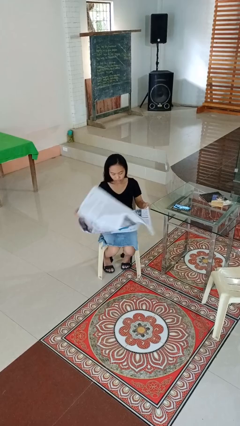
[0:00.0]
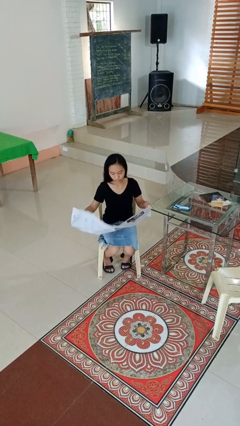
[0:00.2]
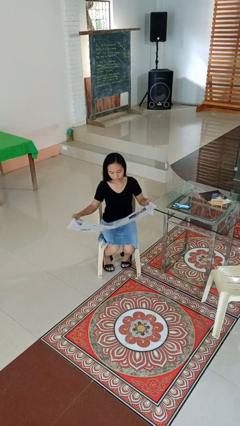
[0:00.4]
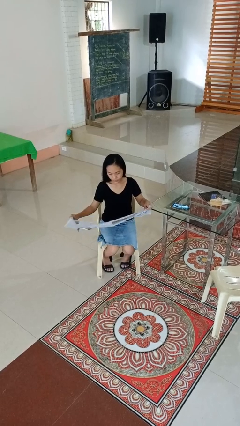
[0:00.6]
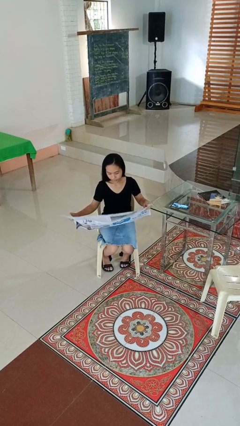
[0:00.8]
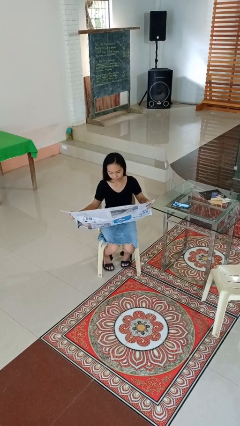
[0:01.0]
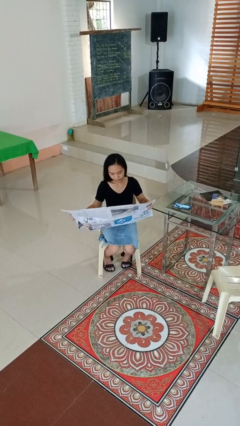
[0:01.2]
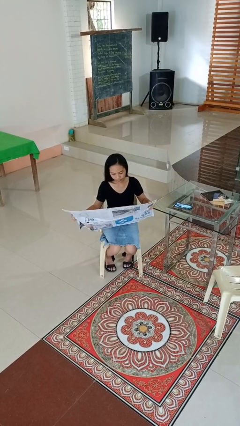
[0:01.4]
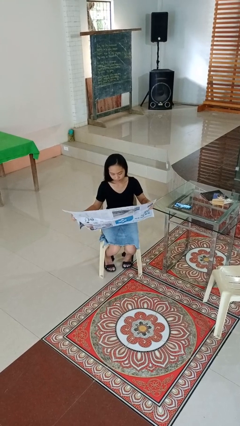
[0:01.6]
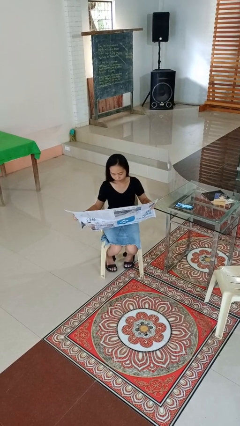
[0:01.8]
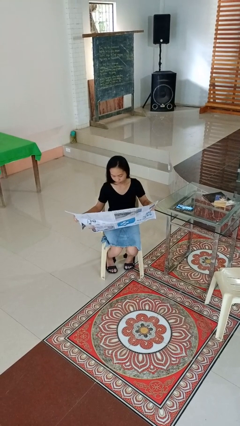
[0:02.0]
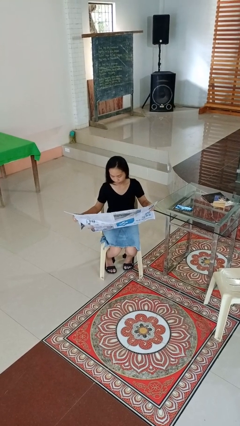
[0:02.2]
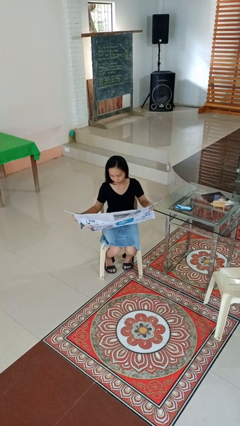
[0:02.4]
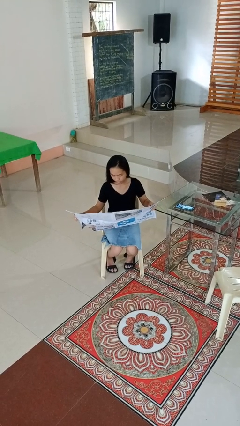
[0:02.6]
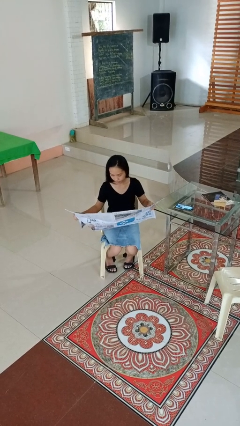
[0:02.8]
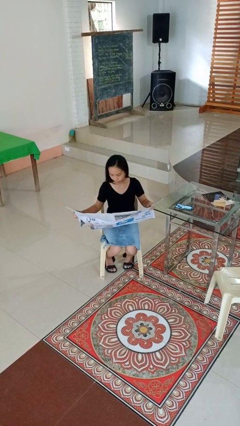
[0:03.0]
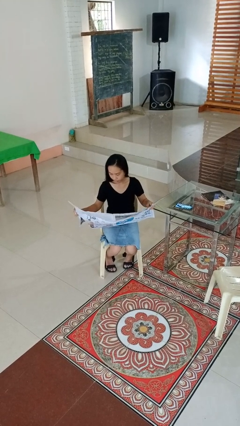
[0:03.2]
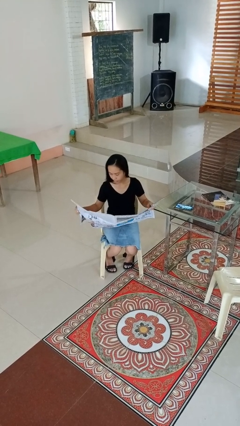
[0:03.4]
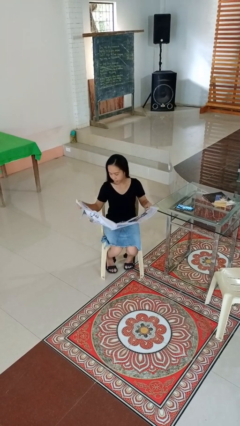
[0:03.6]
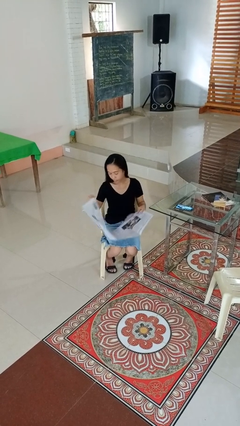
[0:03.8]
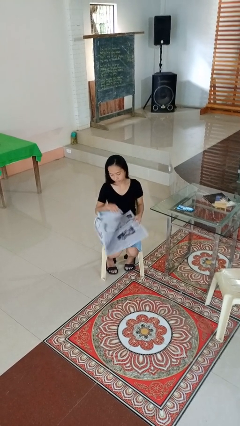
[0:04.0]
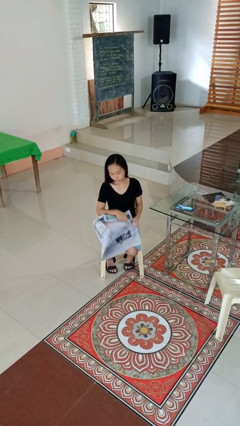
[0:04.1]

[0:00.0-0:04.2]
person reads newspaper

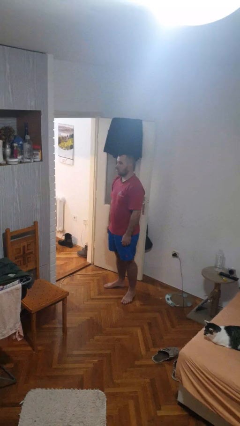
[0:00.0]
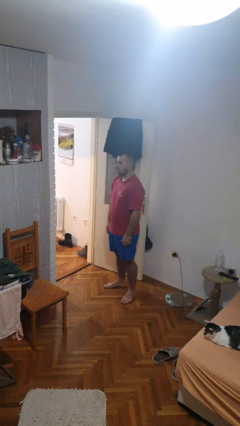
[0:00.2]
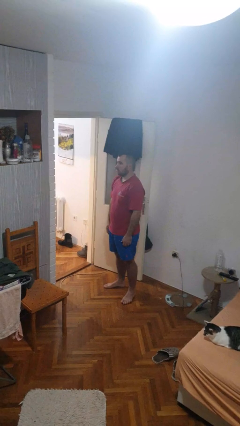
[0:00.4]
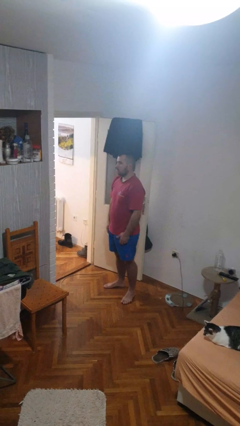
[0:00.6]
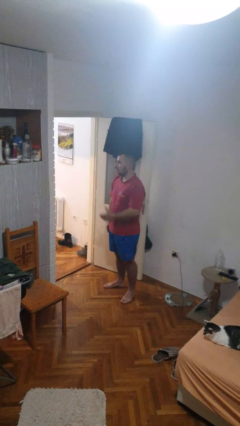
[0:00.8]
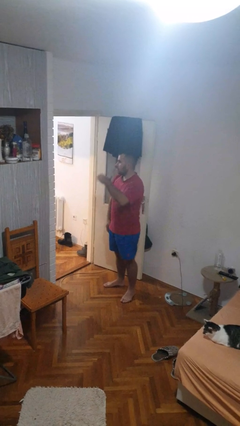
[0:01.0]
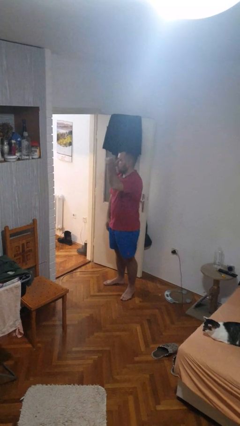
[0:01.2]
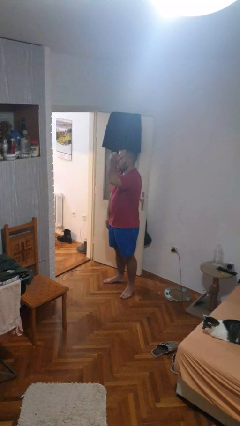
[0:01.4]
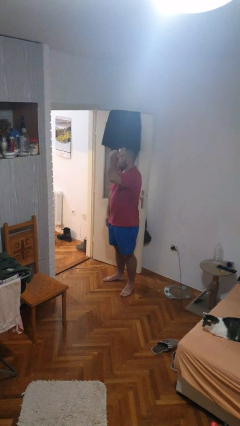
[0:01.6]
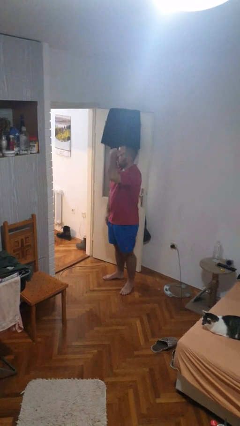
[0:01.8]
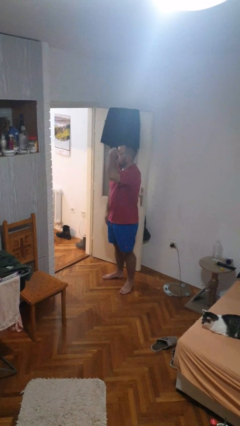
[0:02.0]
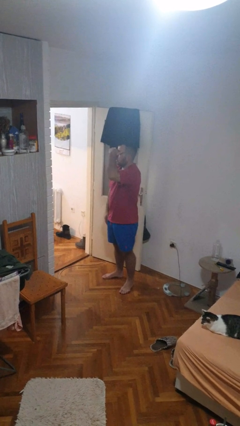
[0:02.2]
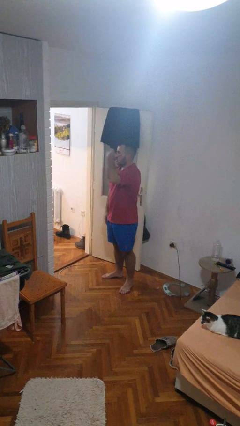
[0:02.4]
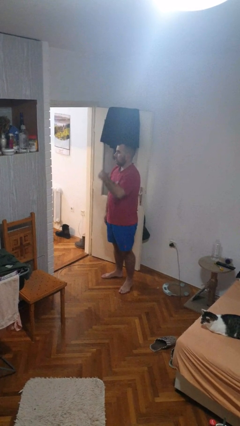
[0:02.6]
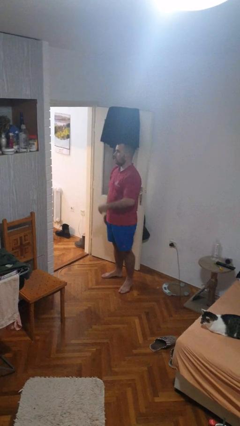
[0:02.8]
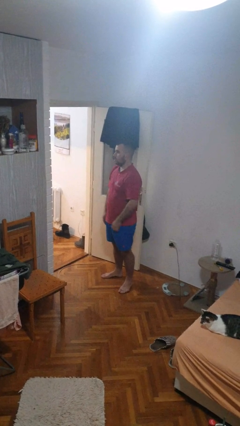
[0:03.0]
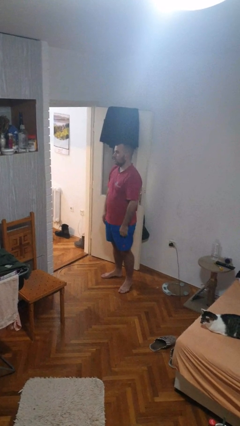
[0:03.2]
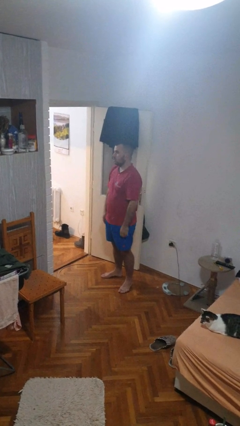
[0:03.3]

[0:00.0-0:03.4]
person shades eyes

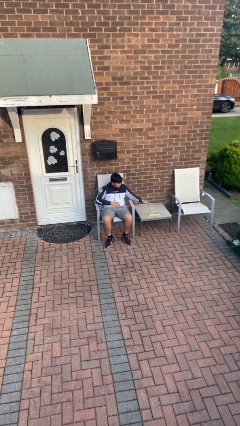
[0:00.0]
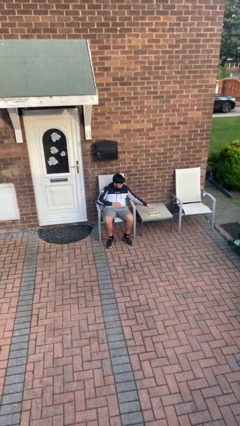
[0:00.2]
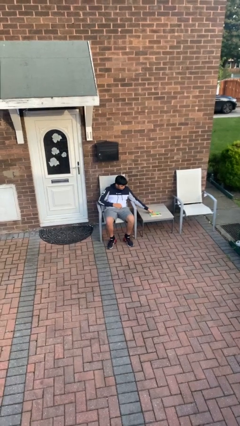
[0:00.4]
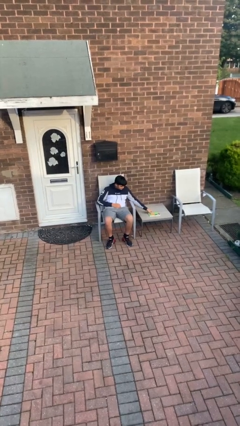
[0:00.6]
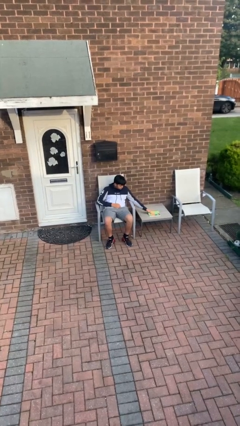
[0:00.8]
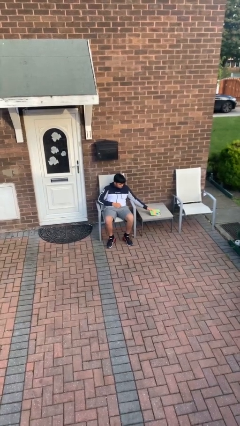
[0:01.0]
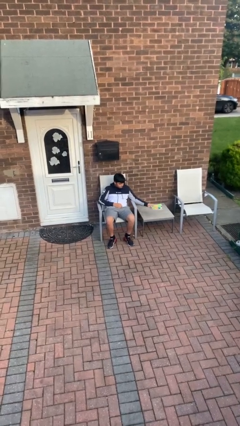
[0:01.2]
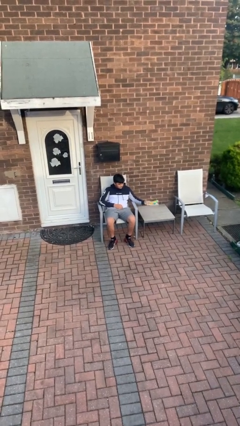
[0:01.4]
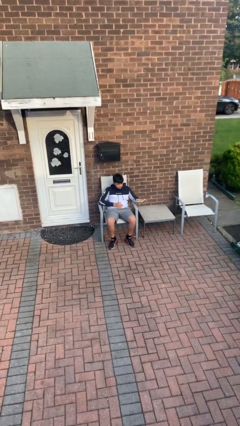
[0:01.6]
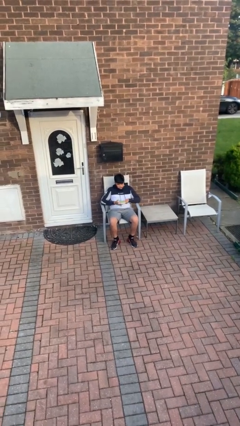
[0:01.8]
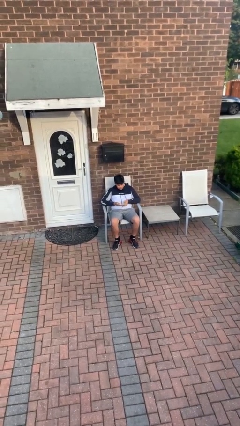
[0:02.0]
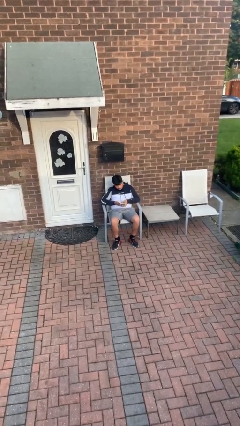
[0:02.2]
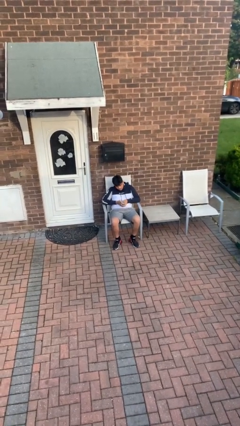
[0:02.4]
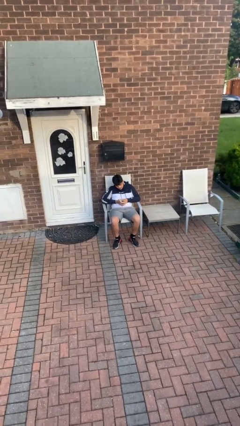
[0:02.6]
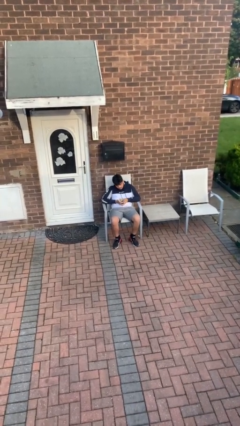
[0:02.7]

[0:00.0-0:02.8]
person picks up object from table

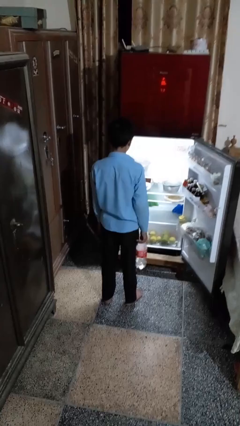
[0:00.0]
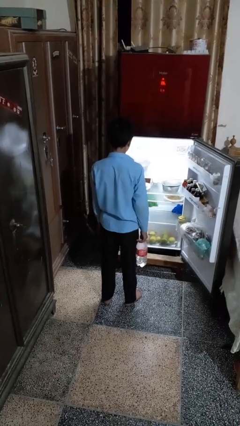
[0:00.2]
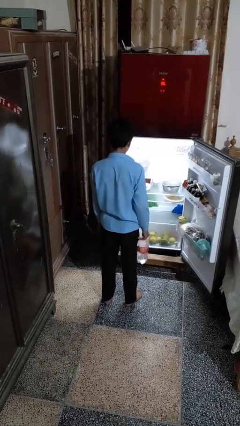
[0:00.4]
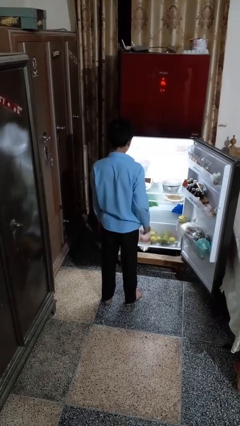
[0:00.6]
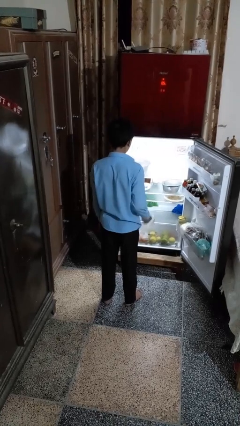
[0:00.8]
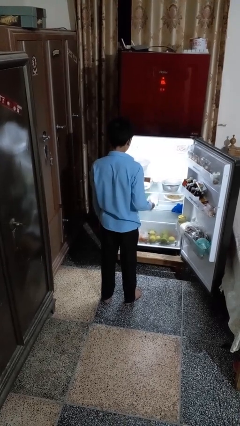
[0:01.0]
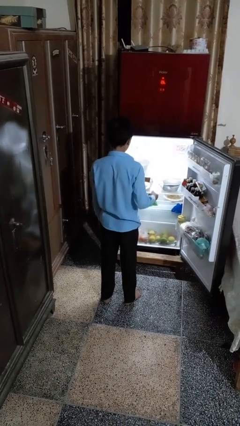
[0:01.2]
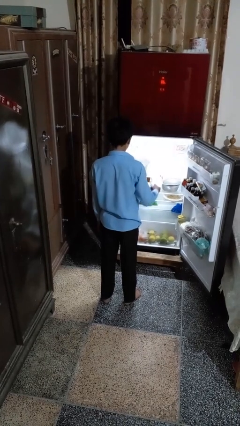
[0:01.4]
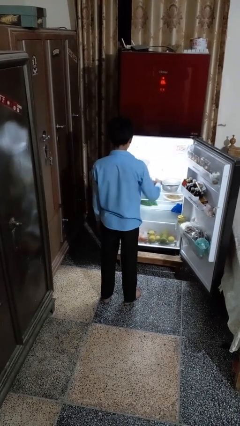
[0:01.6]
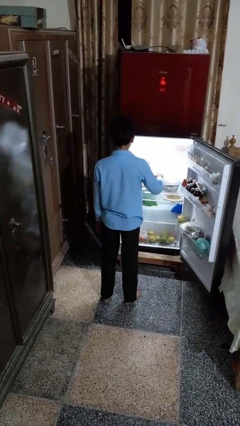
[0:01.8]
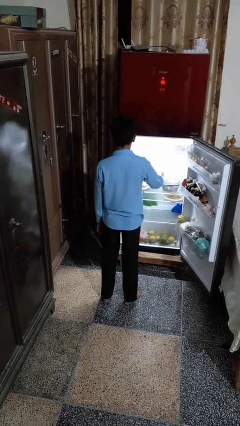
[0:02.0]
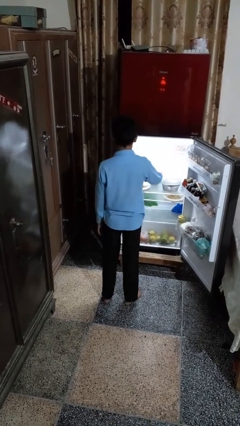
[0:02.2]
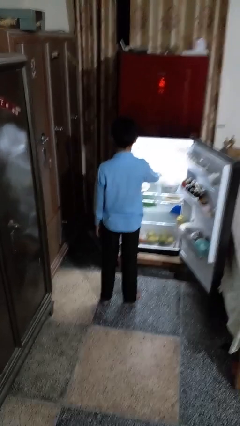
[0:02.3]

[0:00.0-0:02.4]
person puts object into refrigerator

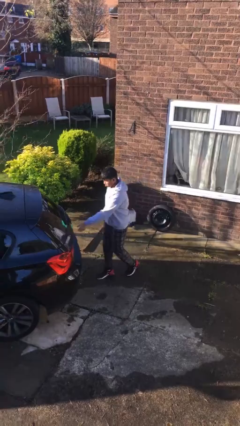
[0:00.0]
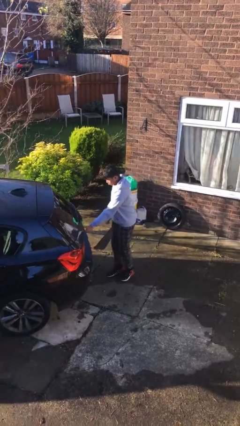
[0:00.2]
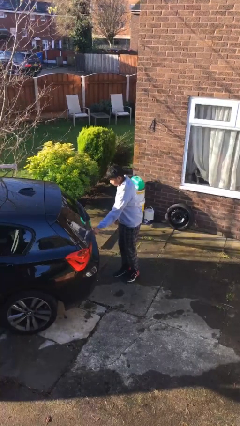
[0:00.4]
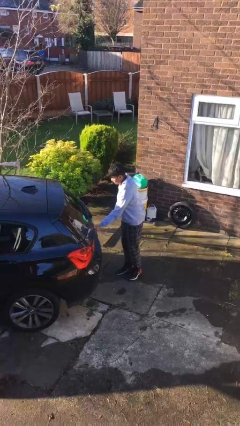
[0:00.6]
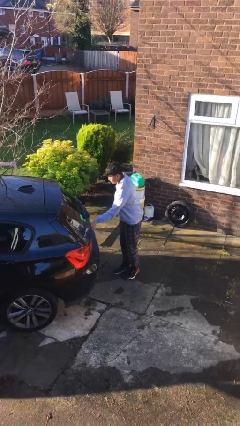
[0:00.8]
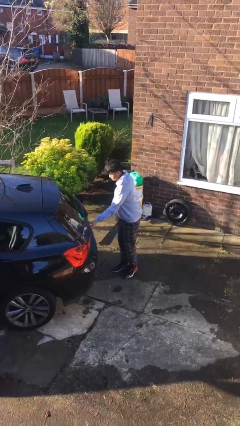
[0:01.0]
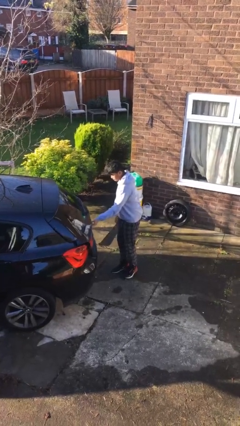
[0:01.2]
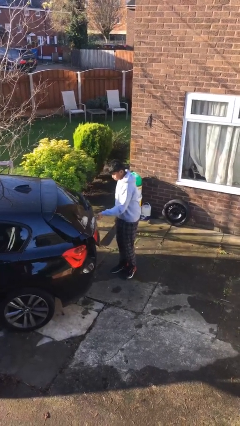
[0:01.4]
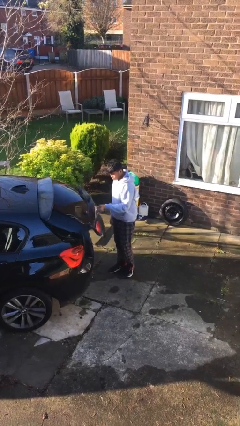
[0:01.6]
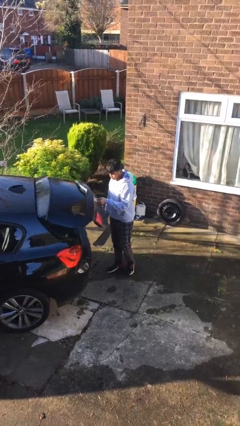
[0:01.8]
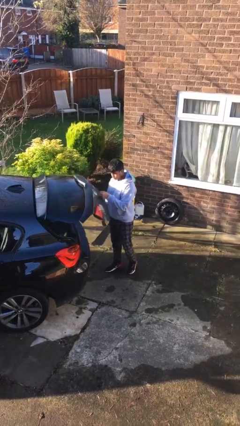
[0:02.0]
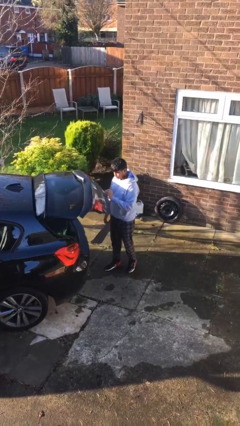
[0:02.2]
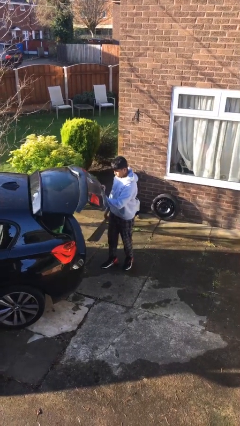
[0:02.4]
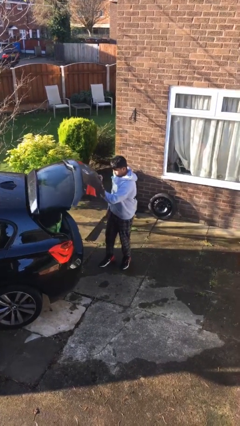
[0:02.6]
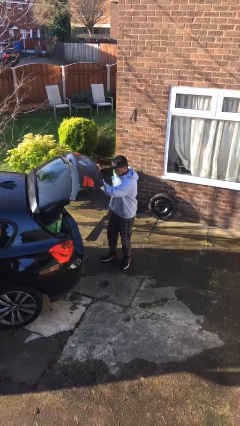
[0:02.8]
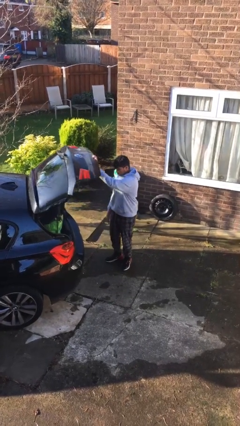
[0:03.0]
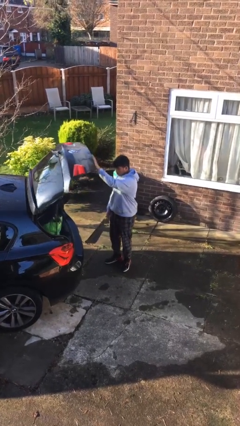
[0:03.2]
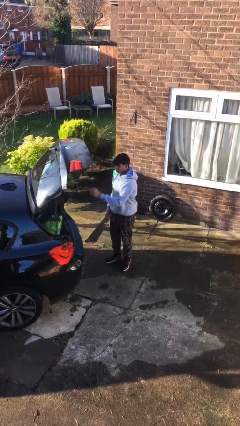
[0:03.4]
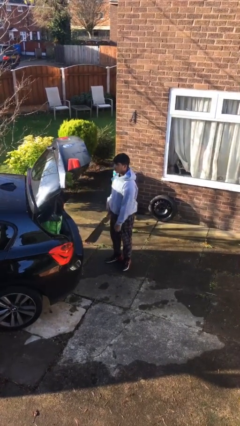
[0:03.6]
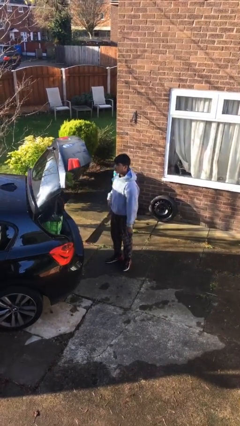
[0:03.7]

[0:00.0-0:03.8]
person opens car trunk

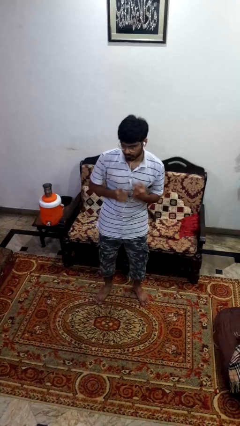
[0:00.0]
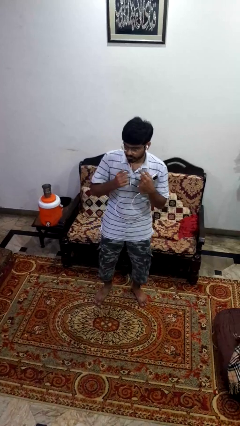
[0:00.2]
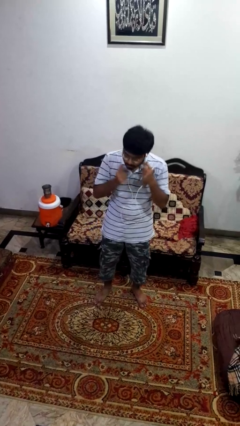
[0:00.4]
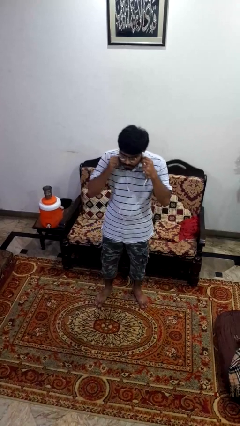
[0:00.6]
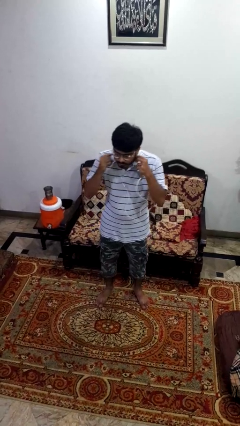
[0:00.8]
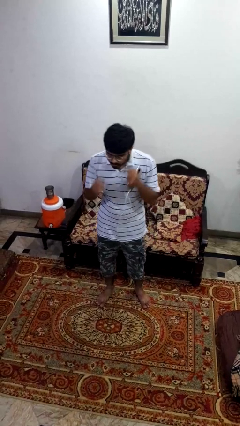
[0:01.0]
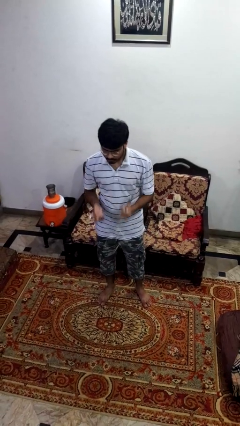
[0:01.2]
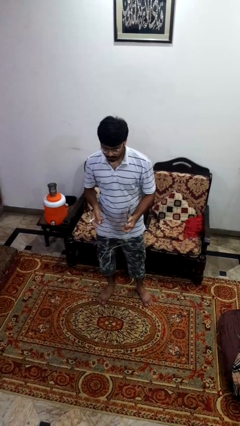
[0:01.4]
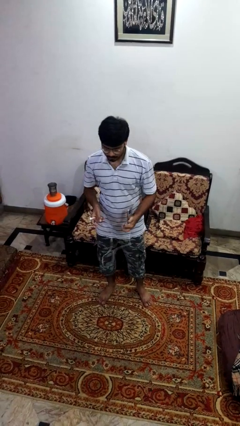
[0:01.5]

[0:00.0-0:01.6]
person takes off headphones
